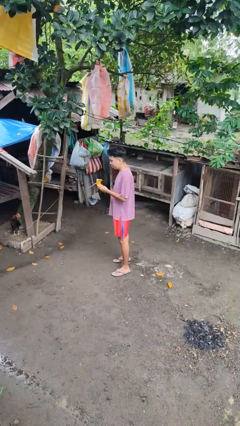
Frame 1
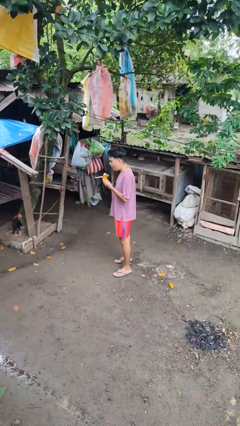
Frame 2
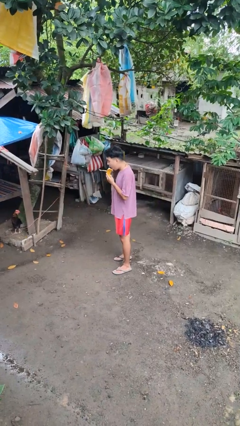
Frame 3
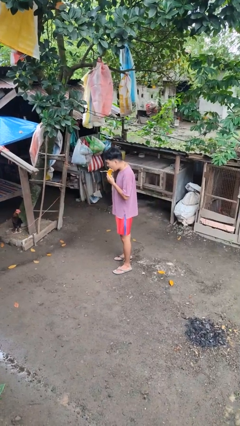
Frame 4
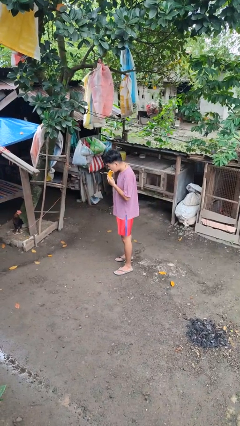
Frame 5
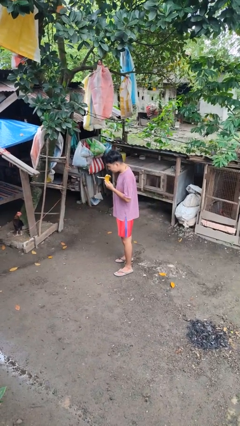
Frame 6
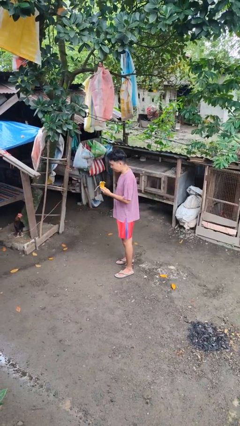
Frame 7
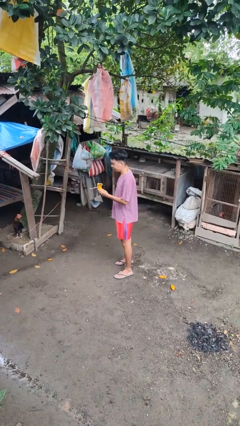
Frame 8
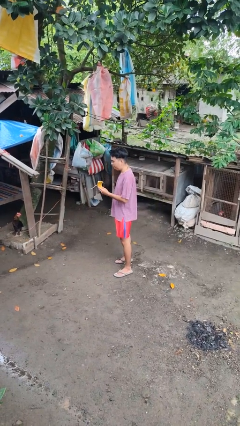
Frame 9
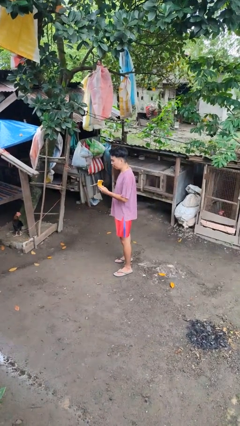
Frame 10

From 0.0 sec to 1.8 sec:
person eats banana

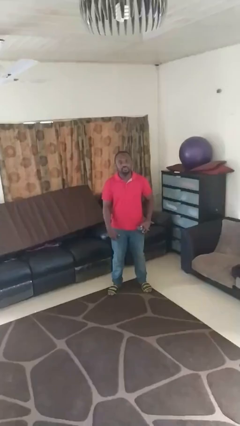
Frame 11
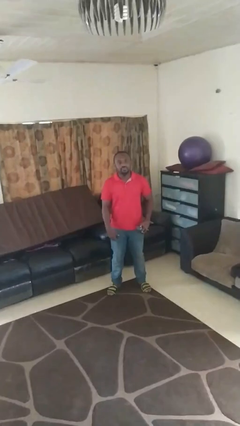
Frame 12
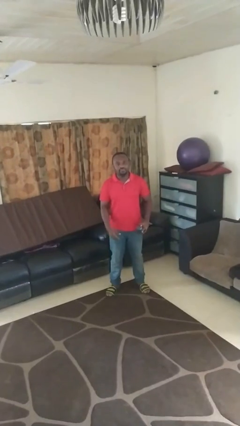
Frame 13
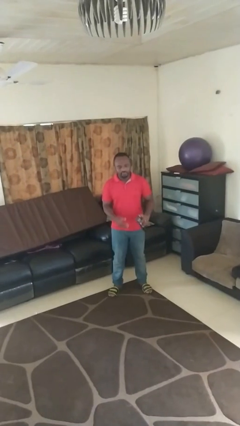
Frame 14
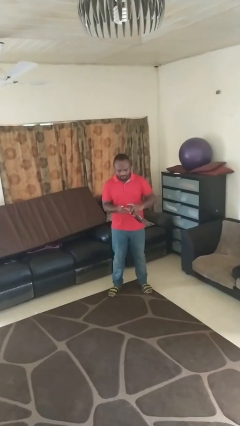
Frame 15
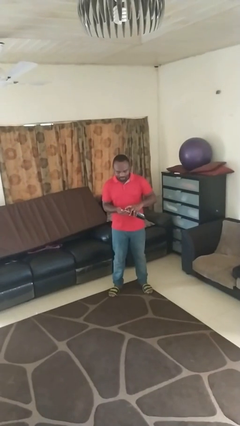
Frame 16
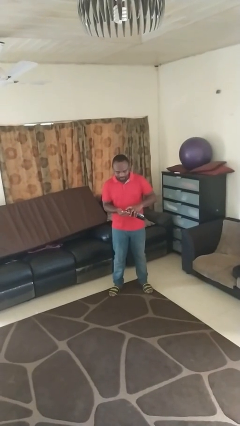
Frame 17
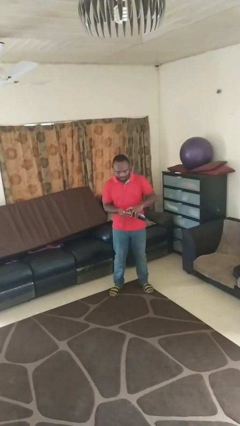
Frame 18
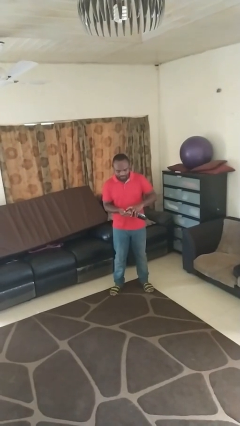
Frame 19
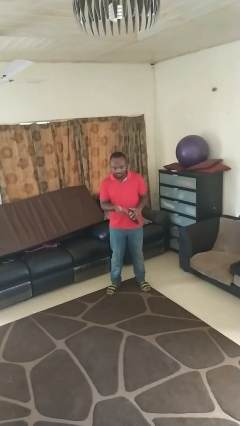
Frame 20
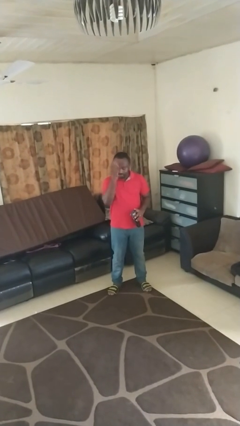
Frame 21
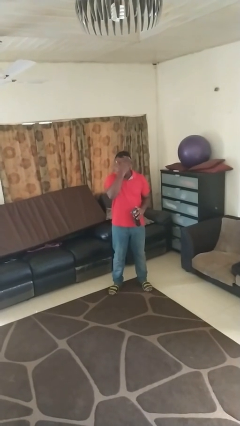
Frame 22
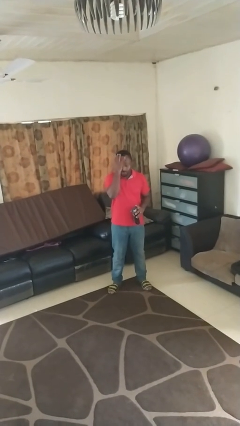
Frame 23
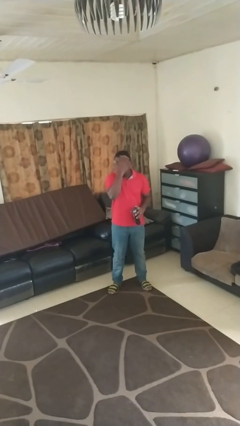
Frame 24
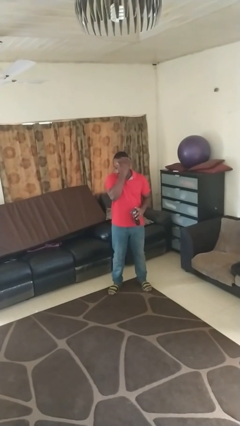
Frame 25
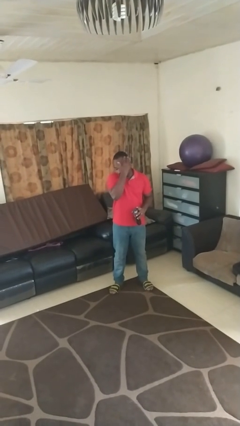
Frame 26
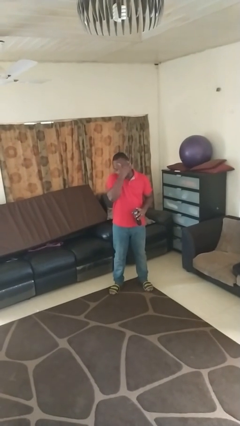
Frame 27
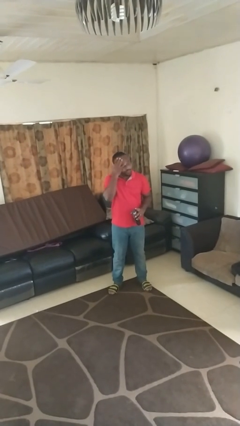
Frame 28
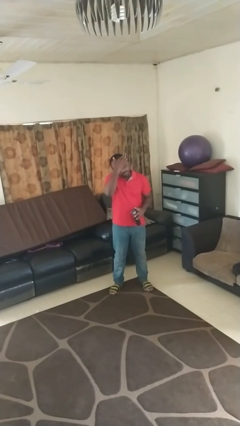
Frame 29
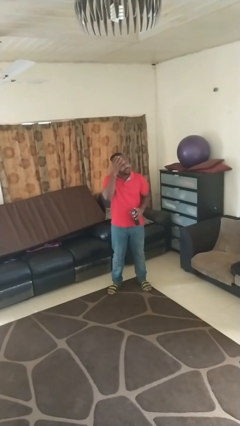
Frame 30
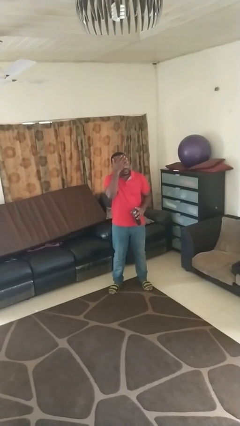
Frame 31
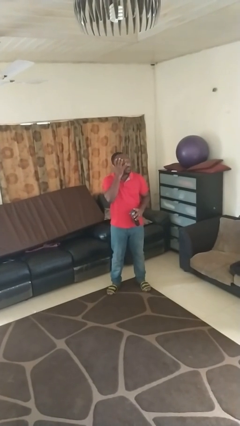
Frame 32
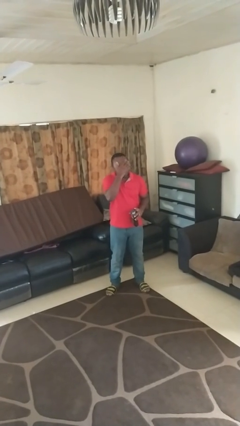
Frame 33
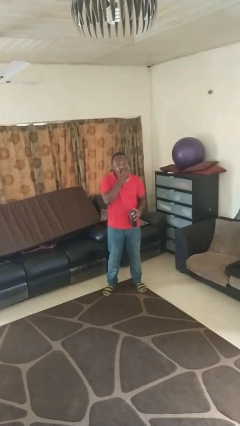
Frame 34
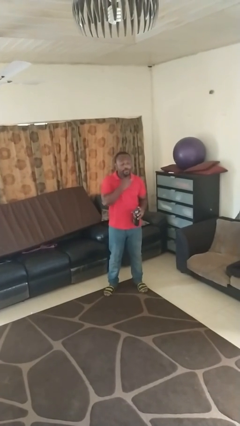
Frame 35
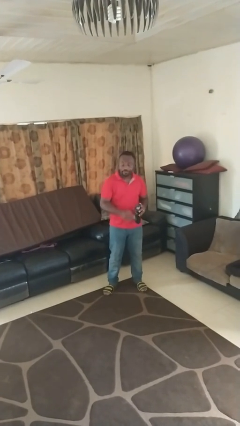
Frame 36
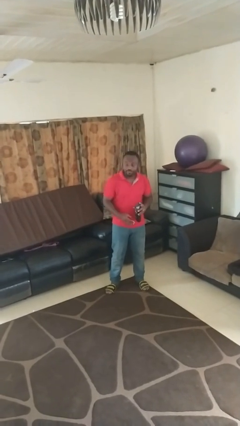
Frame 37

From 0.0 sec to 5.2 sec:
person applies facial moisturizer

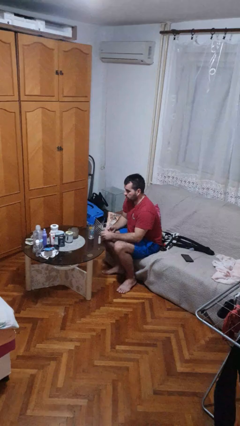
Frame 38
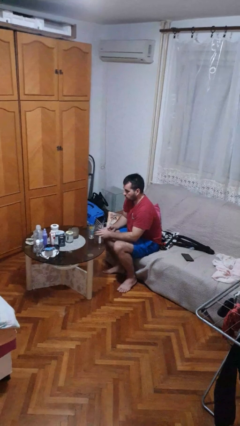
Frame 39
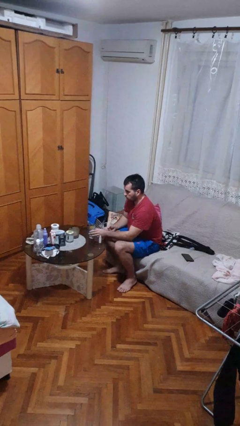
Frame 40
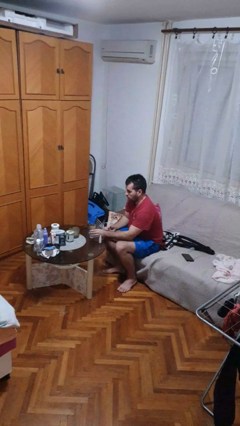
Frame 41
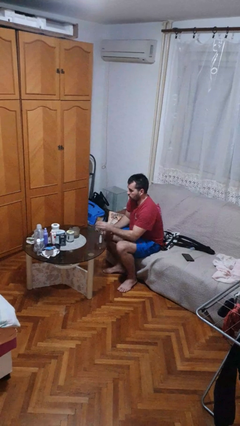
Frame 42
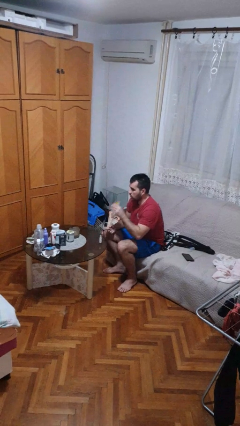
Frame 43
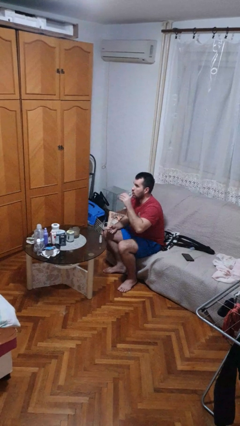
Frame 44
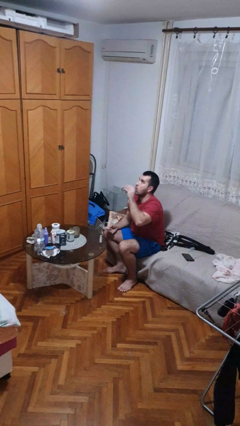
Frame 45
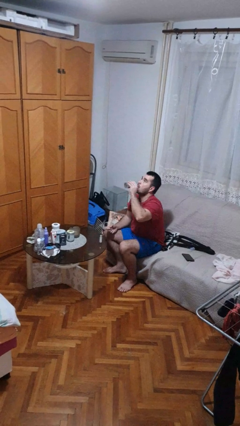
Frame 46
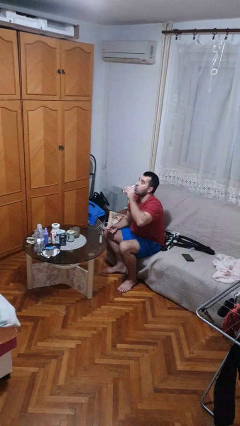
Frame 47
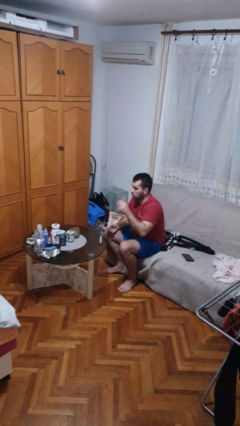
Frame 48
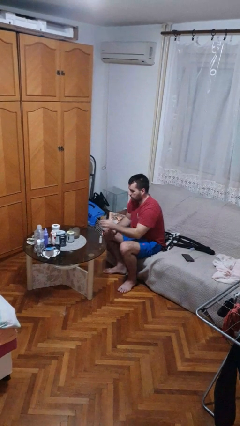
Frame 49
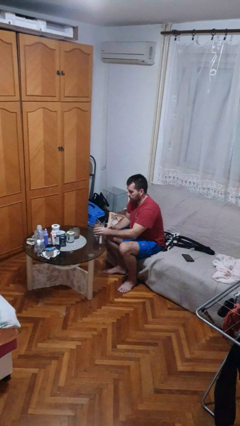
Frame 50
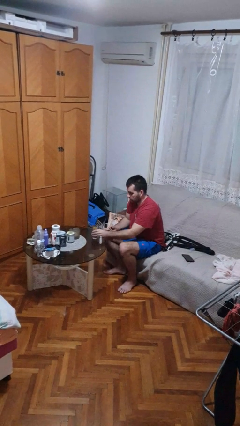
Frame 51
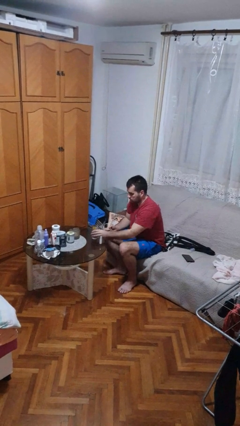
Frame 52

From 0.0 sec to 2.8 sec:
person drinks from cup

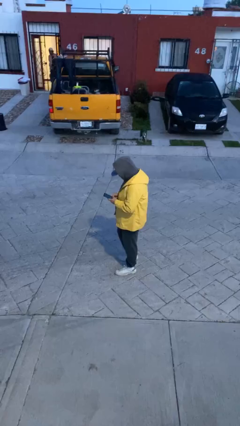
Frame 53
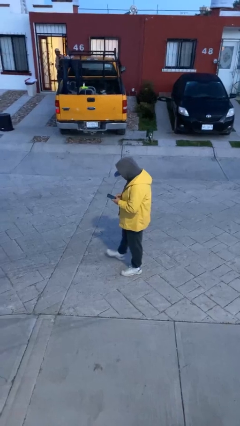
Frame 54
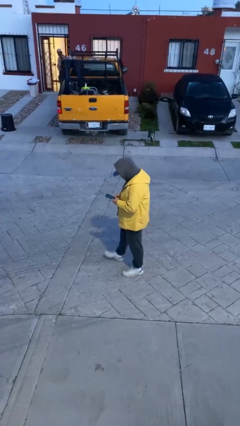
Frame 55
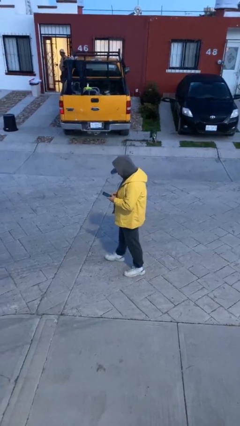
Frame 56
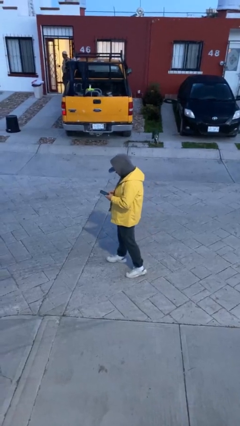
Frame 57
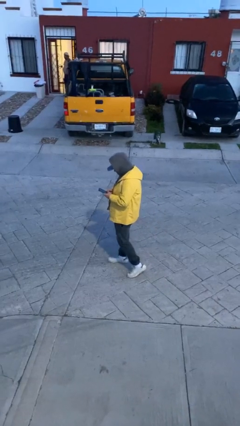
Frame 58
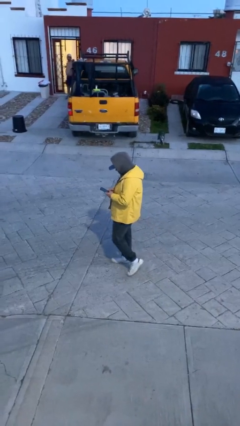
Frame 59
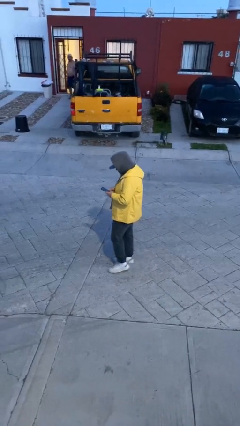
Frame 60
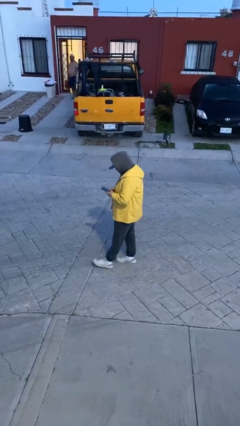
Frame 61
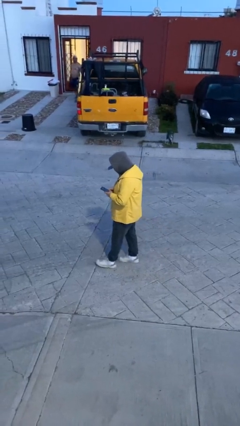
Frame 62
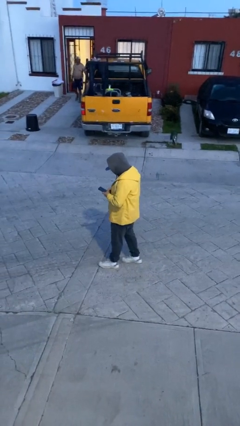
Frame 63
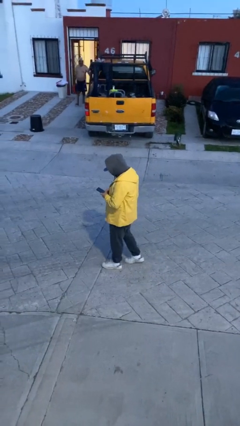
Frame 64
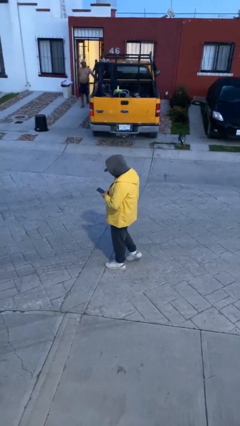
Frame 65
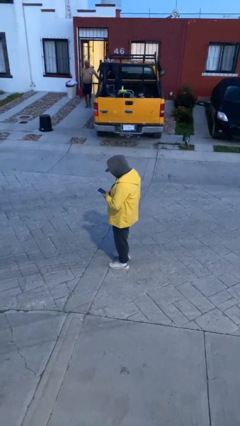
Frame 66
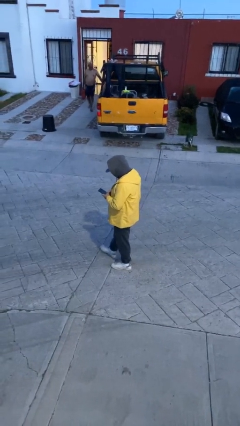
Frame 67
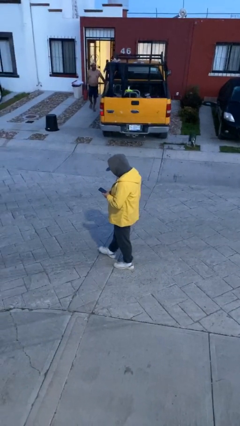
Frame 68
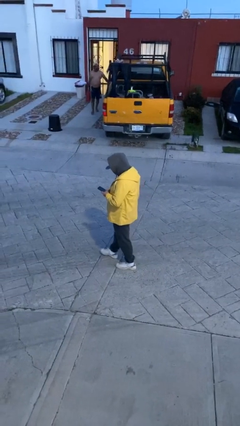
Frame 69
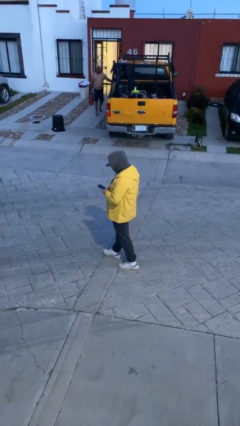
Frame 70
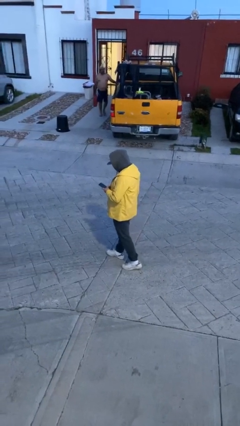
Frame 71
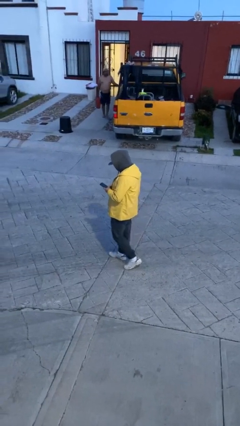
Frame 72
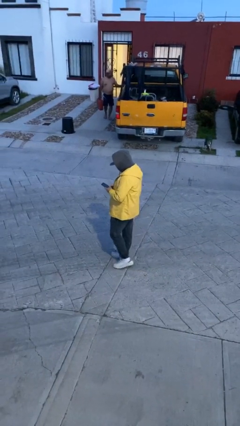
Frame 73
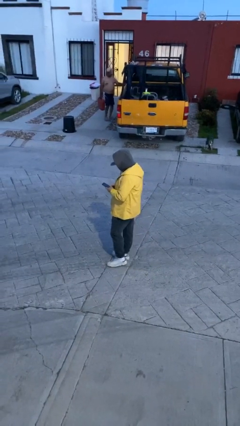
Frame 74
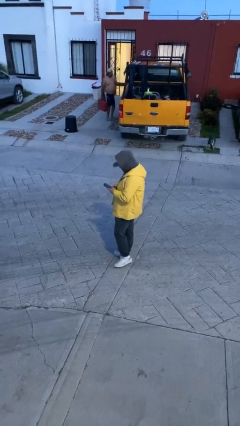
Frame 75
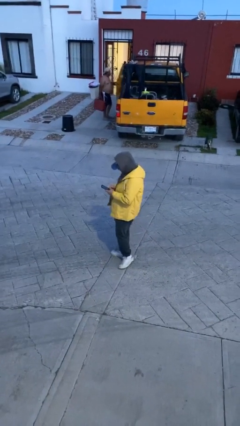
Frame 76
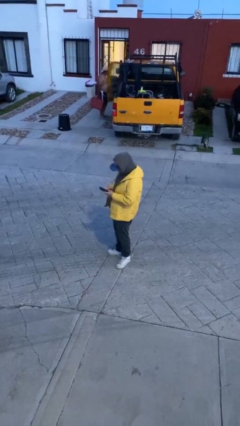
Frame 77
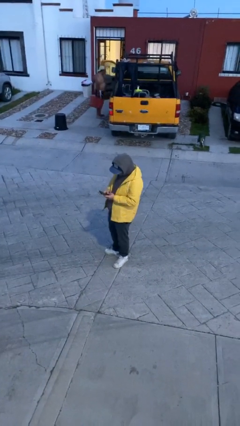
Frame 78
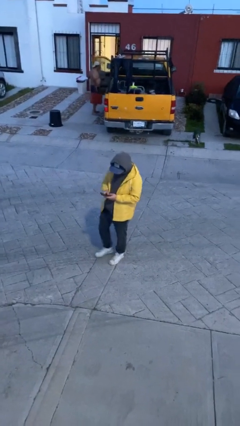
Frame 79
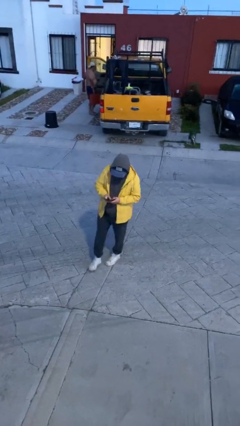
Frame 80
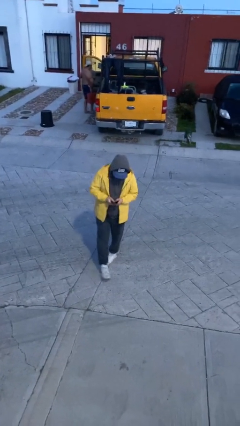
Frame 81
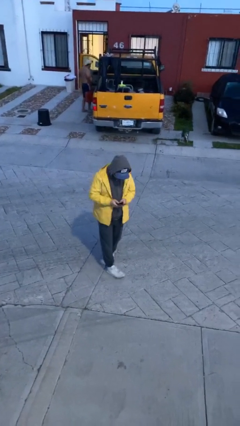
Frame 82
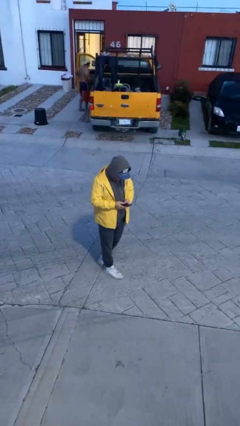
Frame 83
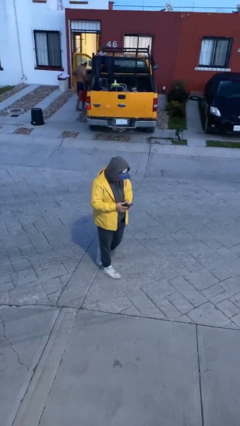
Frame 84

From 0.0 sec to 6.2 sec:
person texts on phone

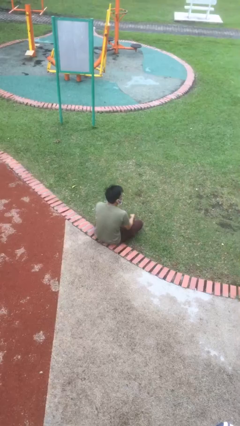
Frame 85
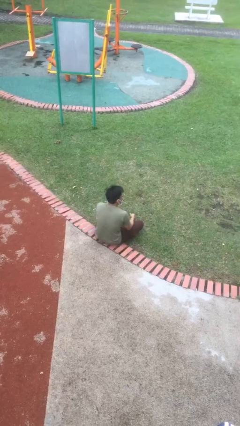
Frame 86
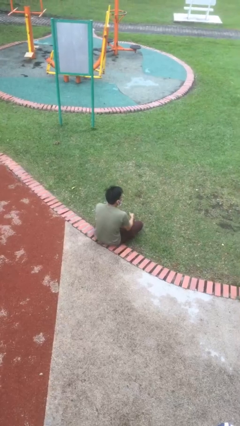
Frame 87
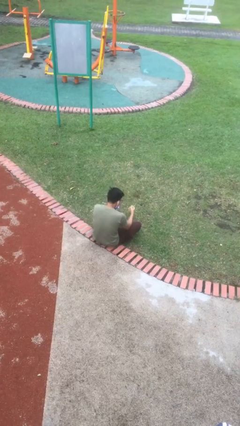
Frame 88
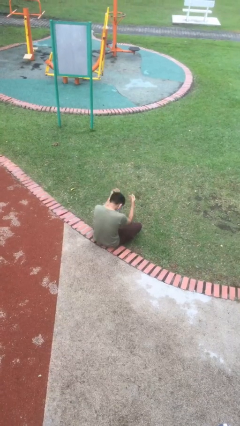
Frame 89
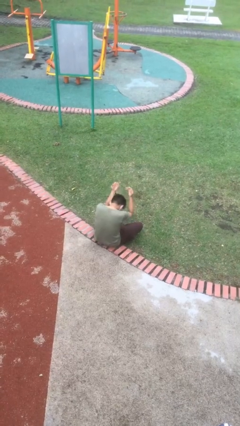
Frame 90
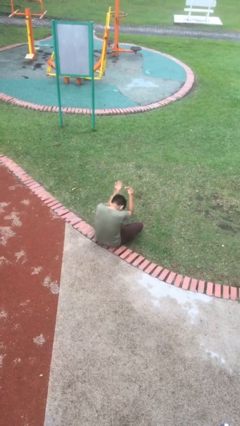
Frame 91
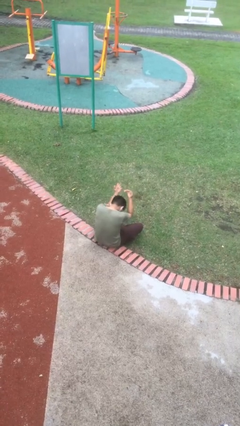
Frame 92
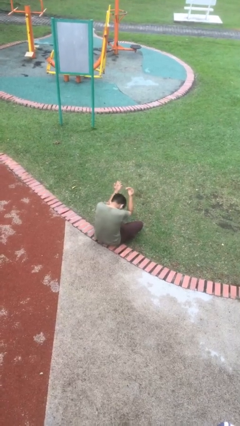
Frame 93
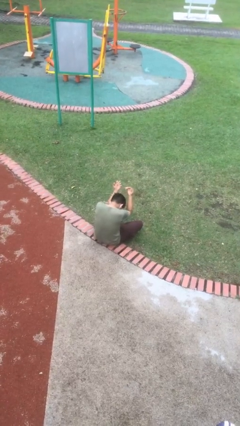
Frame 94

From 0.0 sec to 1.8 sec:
person prays
